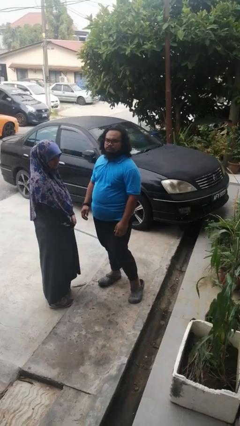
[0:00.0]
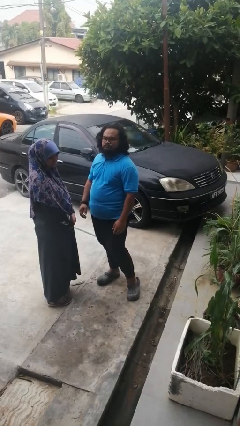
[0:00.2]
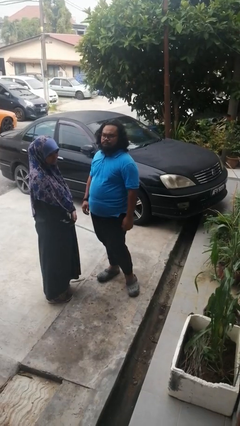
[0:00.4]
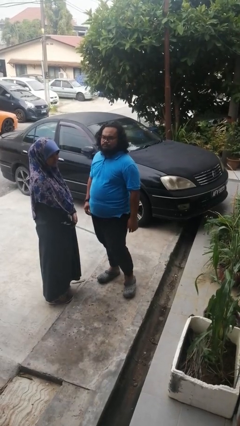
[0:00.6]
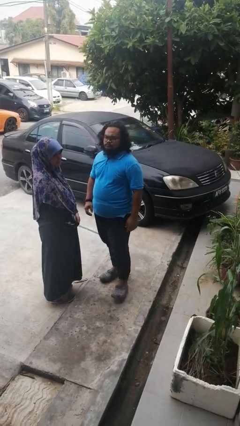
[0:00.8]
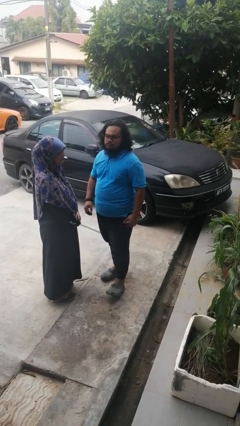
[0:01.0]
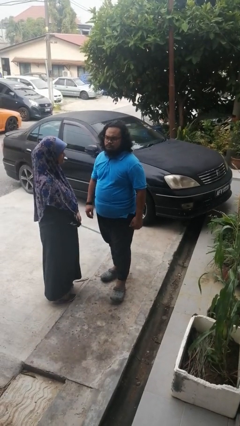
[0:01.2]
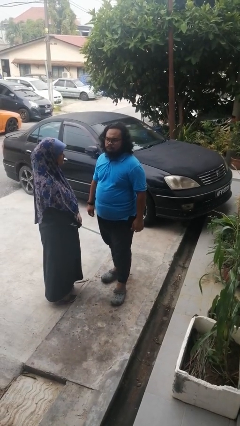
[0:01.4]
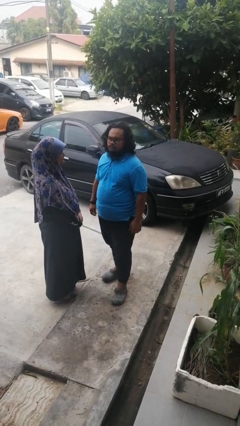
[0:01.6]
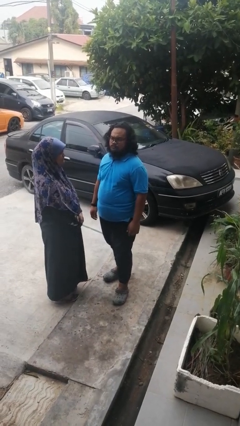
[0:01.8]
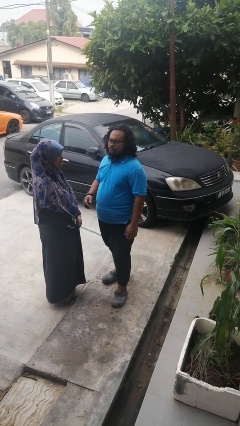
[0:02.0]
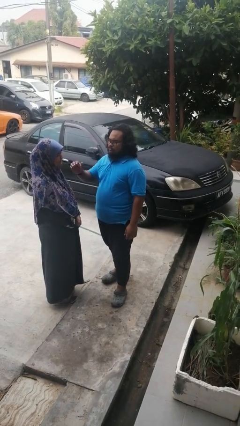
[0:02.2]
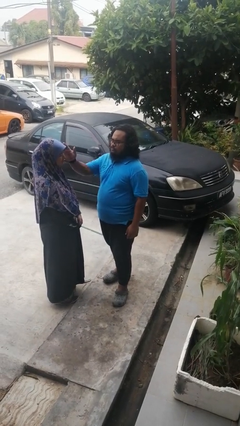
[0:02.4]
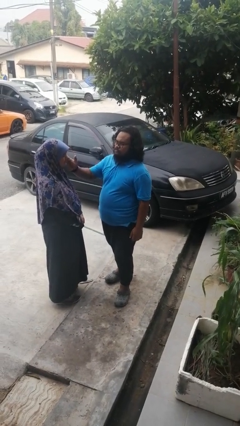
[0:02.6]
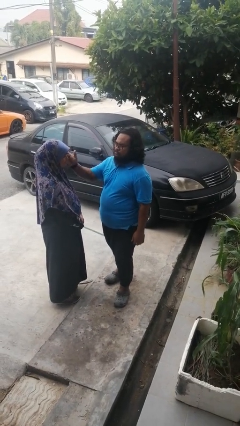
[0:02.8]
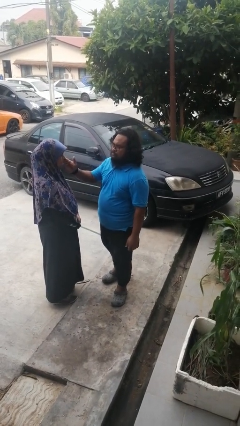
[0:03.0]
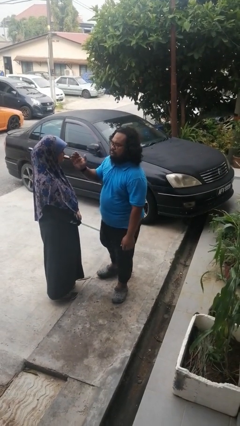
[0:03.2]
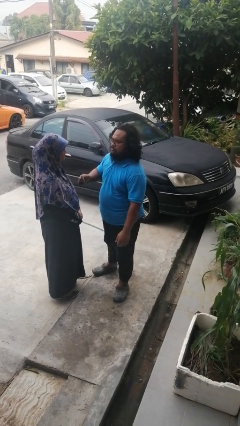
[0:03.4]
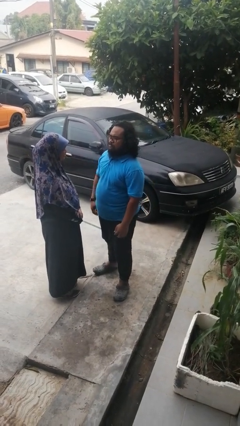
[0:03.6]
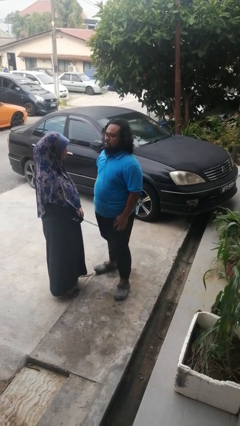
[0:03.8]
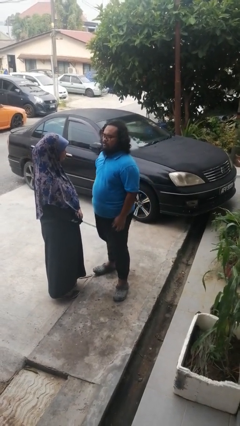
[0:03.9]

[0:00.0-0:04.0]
person touches face of person

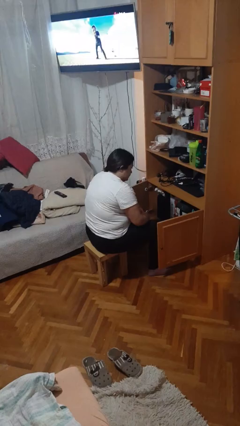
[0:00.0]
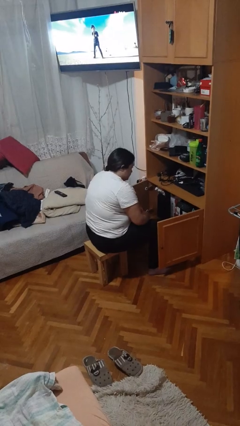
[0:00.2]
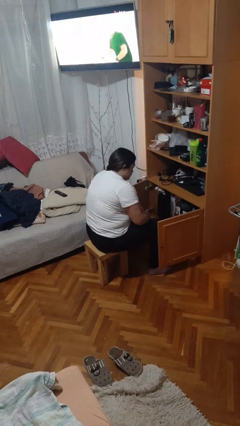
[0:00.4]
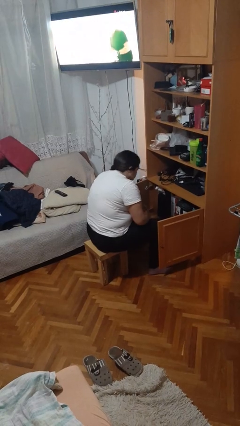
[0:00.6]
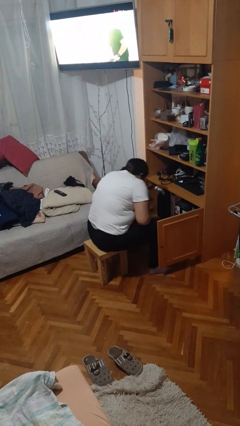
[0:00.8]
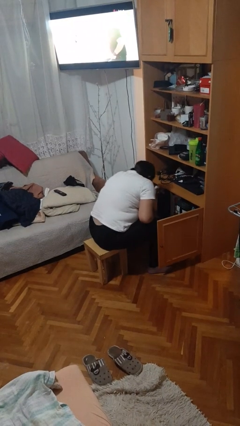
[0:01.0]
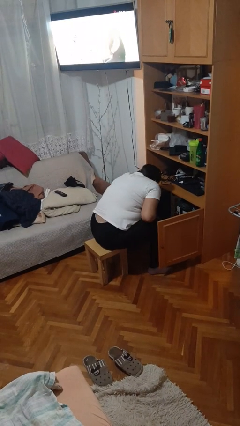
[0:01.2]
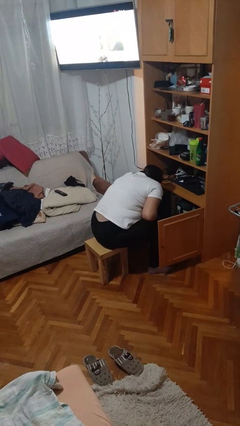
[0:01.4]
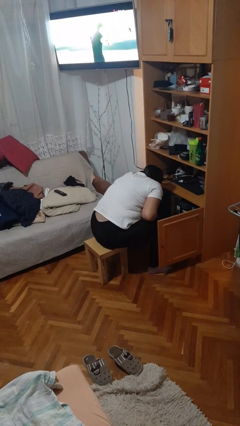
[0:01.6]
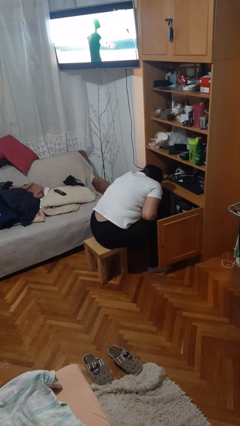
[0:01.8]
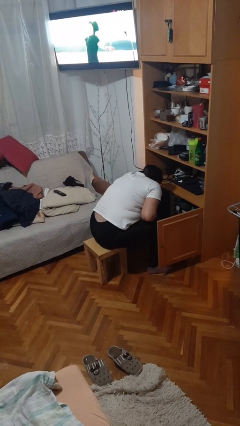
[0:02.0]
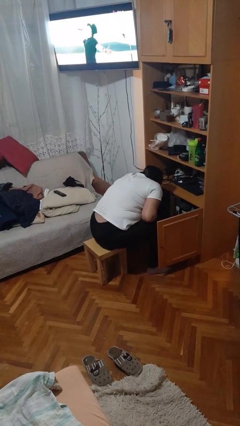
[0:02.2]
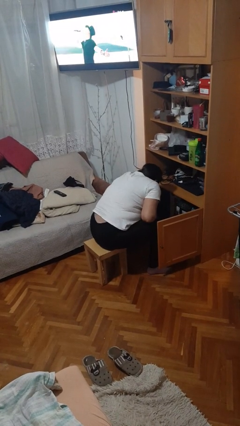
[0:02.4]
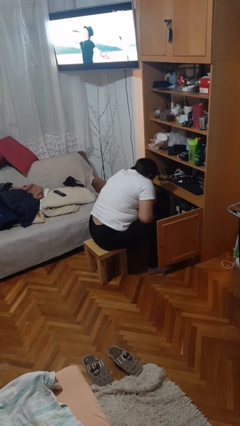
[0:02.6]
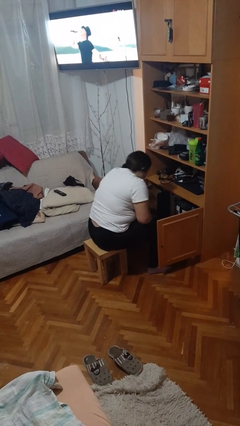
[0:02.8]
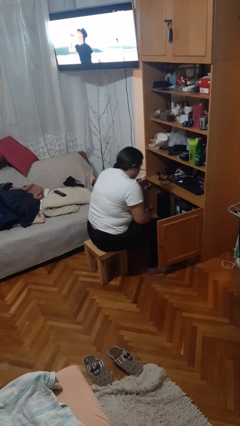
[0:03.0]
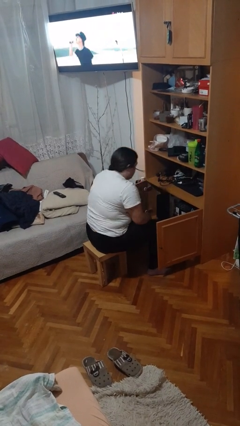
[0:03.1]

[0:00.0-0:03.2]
person searches in cabinet

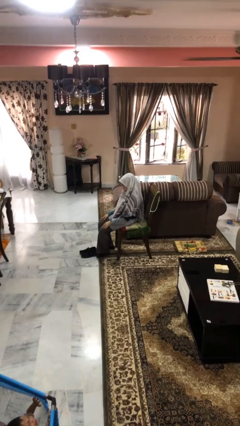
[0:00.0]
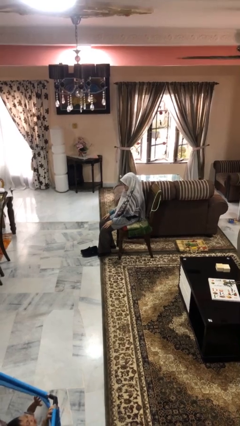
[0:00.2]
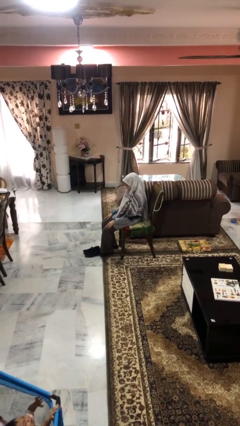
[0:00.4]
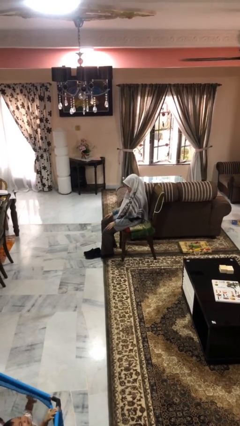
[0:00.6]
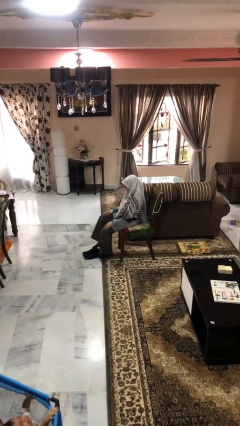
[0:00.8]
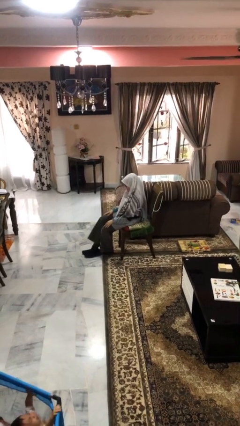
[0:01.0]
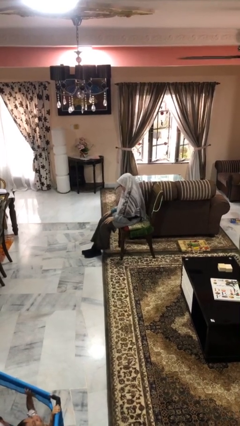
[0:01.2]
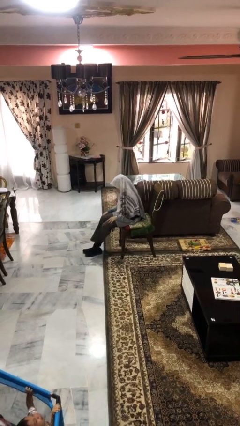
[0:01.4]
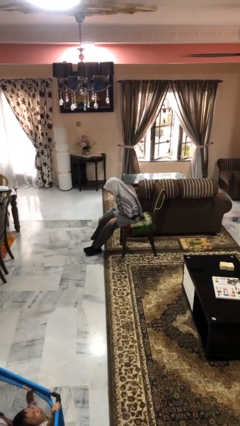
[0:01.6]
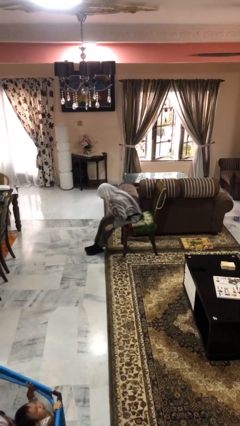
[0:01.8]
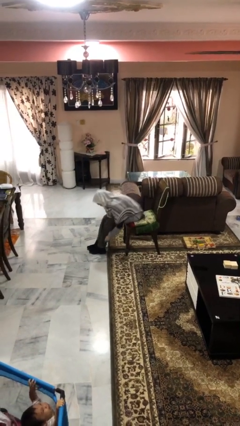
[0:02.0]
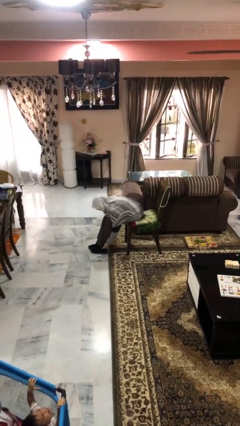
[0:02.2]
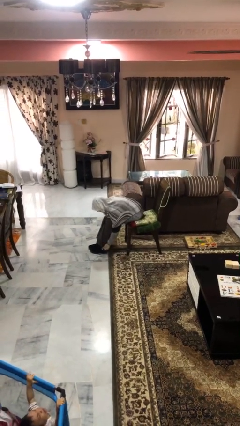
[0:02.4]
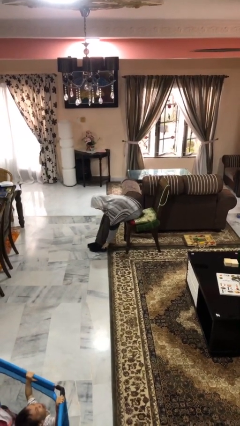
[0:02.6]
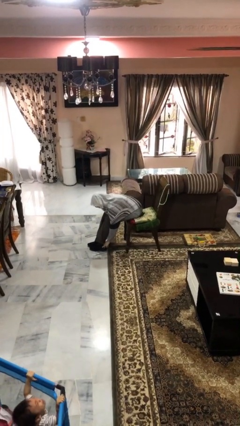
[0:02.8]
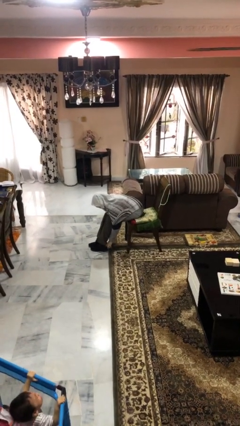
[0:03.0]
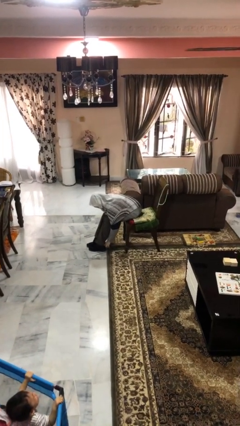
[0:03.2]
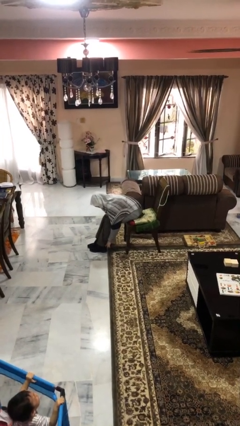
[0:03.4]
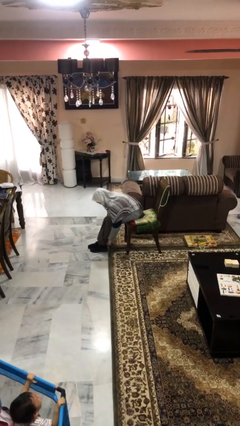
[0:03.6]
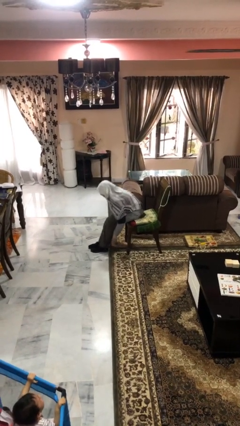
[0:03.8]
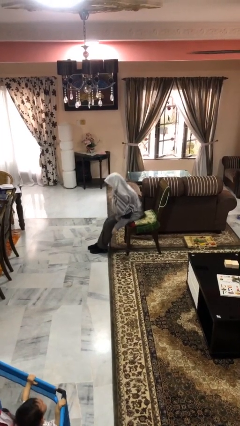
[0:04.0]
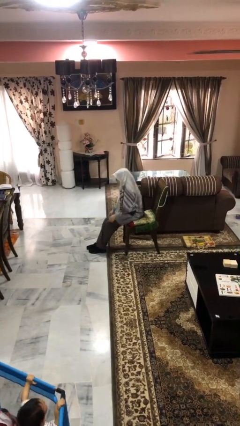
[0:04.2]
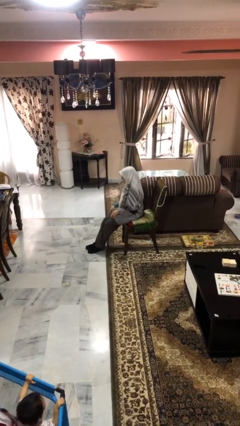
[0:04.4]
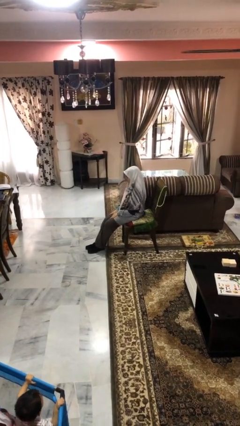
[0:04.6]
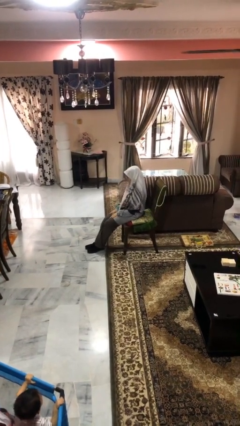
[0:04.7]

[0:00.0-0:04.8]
person puts on shoes

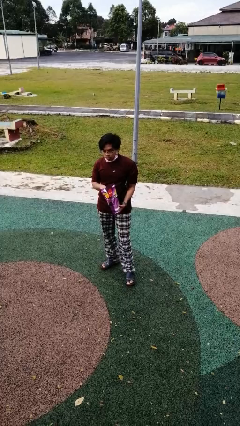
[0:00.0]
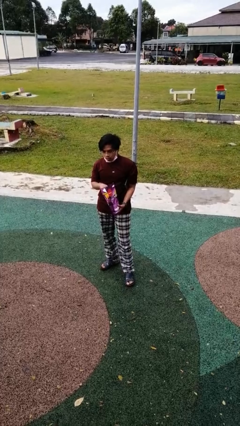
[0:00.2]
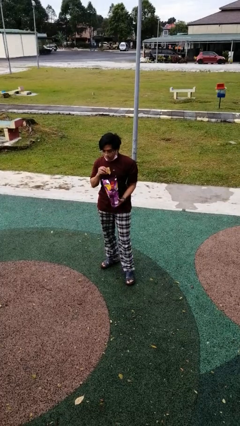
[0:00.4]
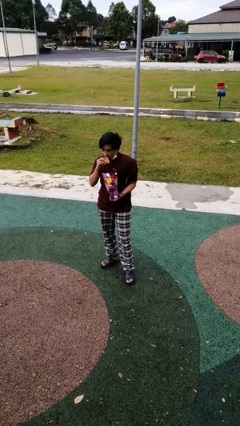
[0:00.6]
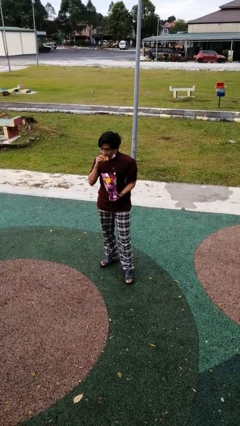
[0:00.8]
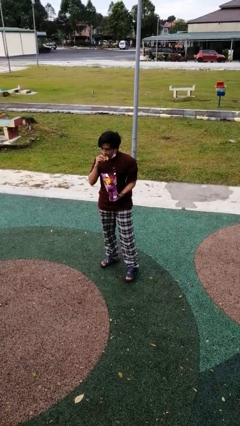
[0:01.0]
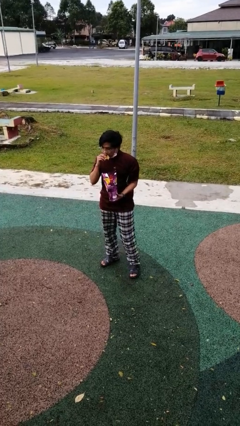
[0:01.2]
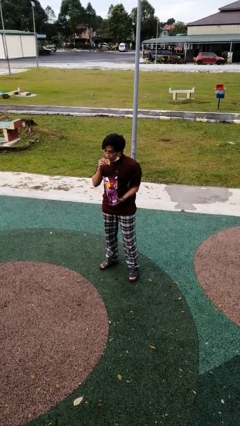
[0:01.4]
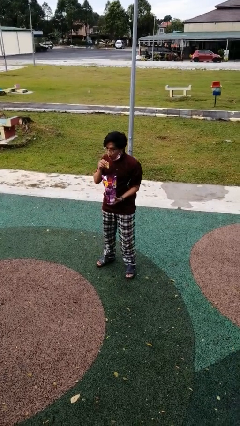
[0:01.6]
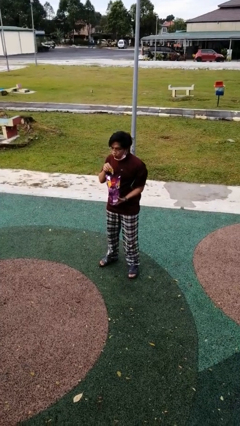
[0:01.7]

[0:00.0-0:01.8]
person eats snack from bag

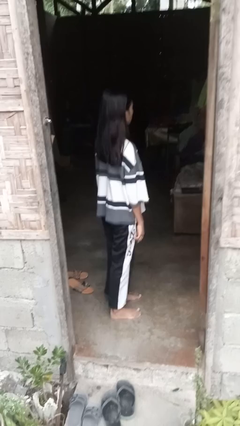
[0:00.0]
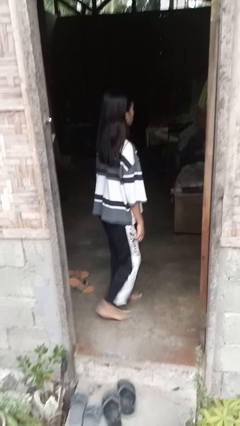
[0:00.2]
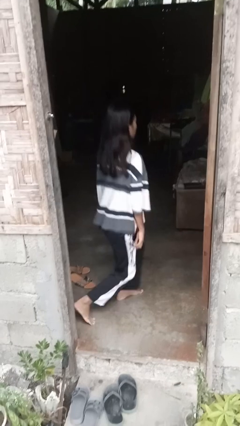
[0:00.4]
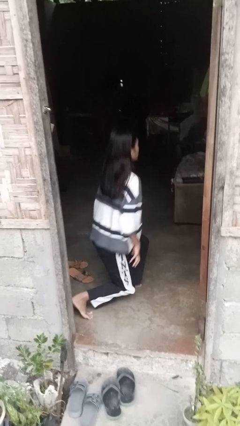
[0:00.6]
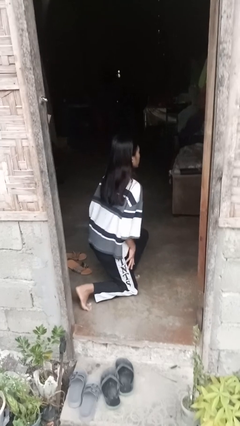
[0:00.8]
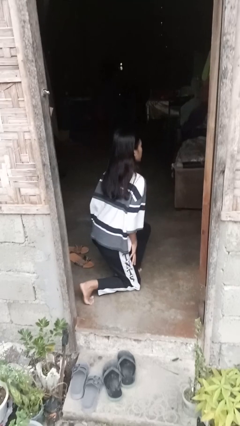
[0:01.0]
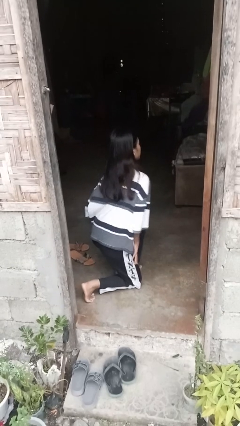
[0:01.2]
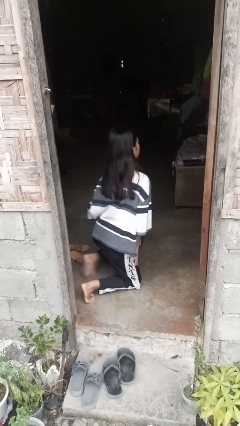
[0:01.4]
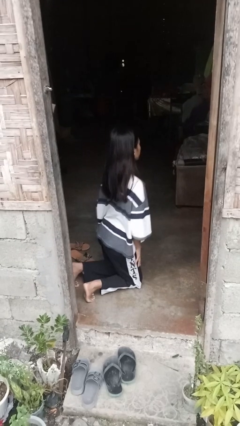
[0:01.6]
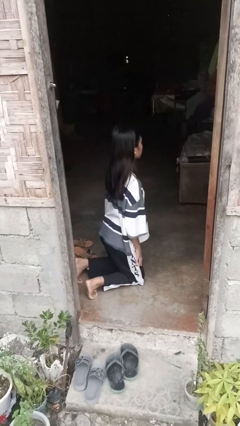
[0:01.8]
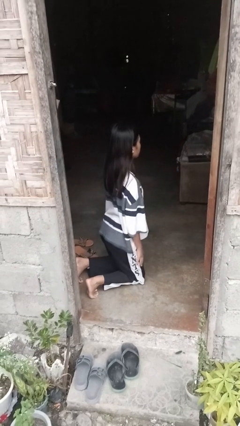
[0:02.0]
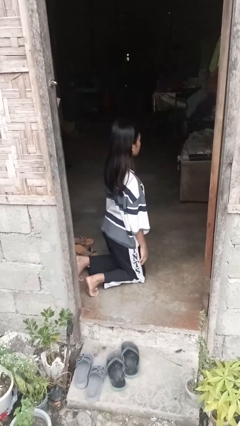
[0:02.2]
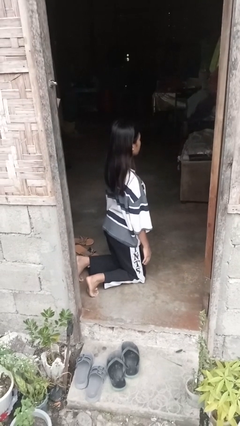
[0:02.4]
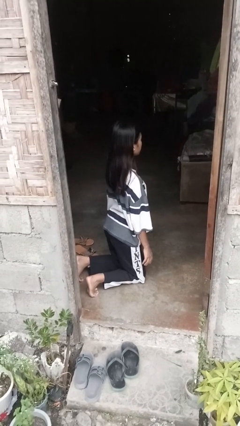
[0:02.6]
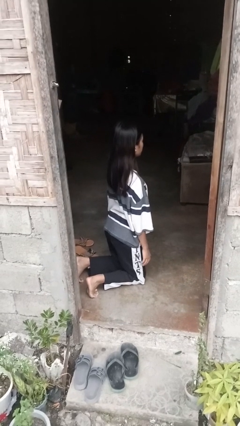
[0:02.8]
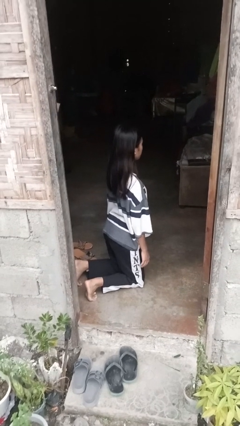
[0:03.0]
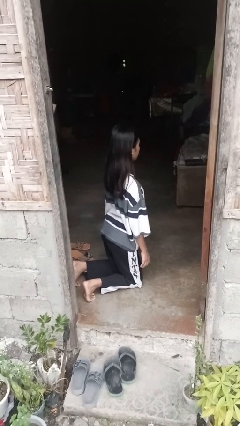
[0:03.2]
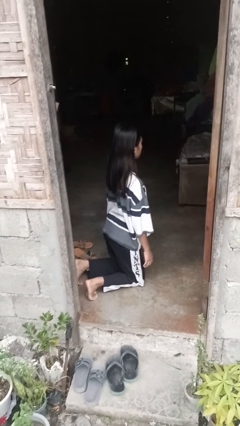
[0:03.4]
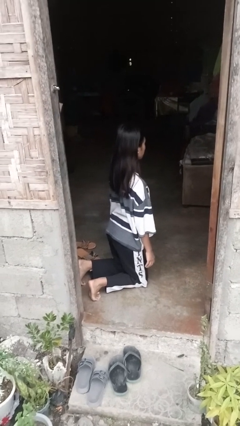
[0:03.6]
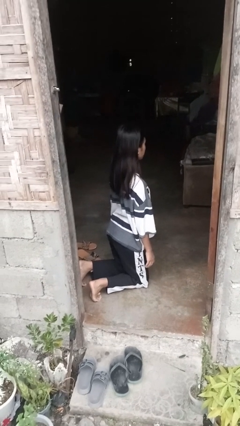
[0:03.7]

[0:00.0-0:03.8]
person kneels
